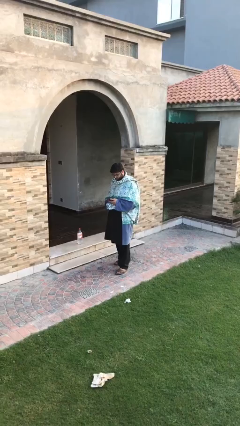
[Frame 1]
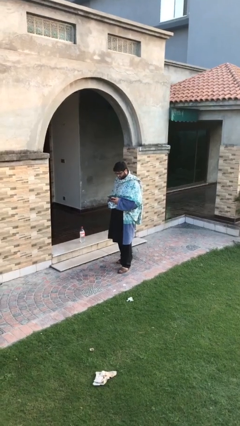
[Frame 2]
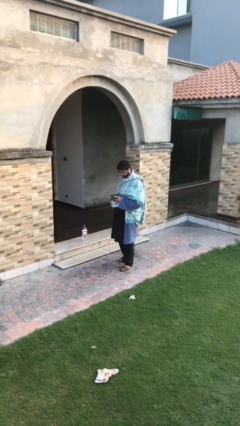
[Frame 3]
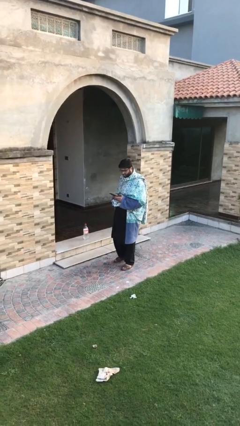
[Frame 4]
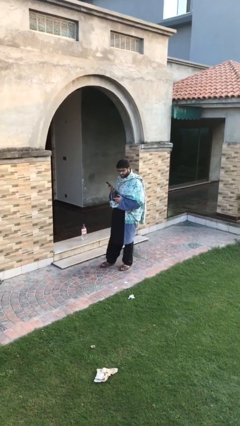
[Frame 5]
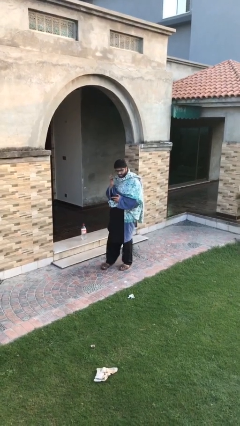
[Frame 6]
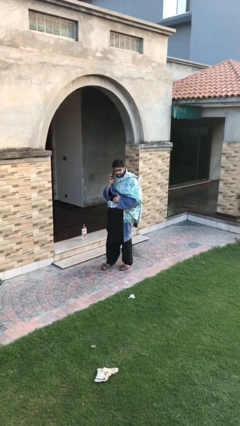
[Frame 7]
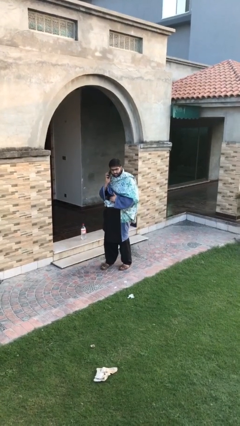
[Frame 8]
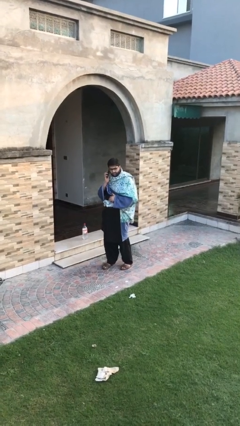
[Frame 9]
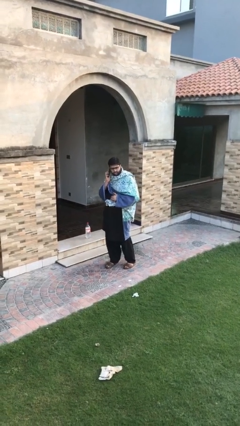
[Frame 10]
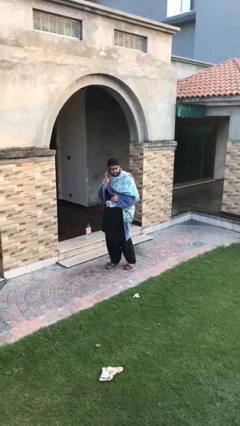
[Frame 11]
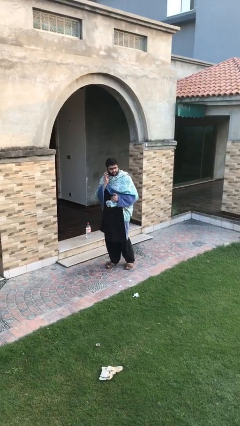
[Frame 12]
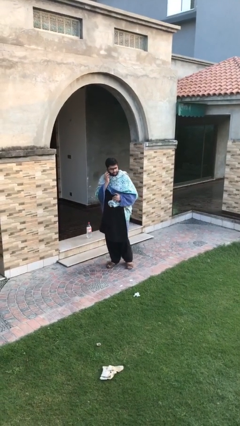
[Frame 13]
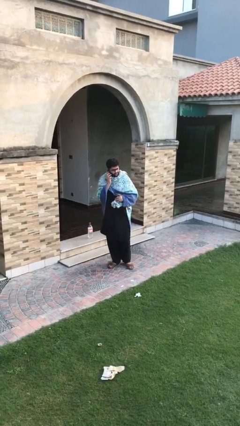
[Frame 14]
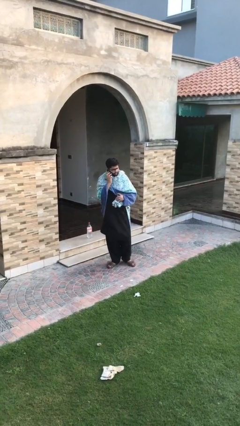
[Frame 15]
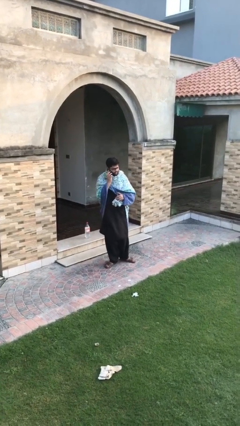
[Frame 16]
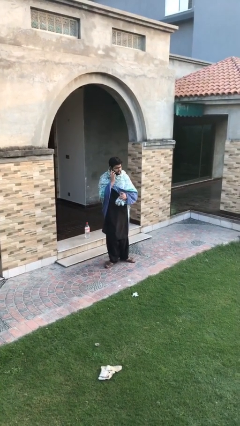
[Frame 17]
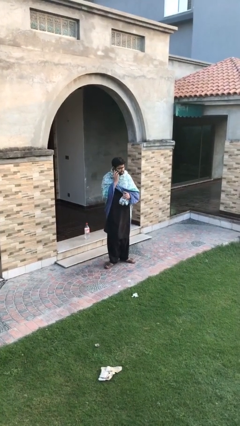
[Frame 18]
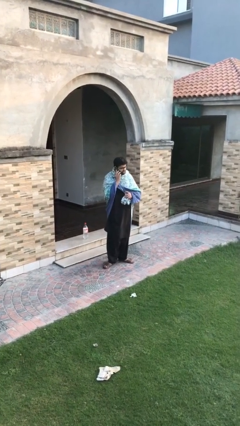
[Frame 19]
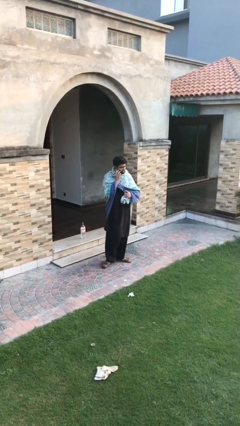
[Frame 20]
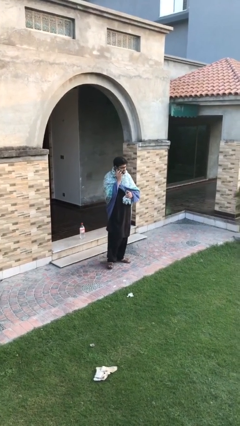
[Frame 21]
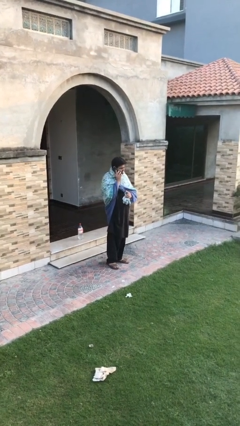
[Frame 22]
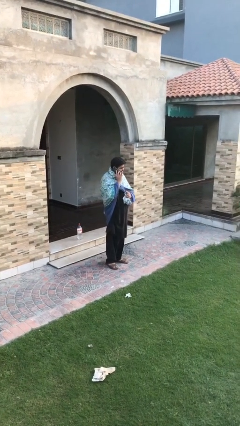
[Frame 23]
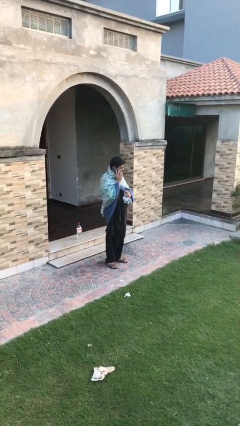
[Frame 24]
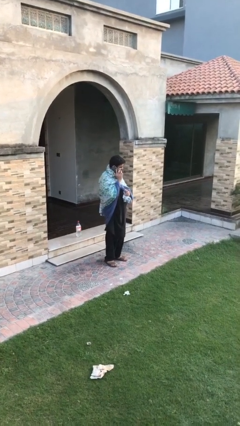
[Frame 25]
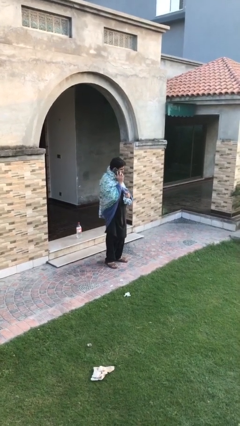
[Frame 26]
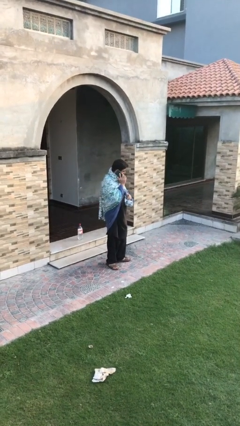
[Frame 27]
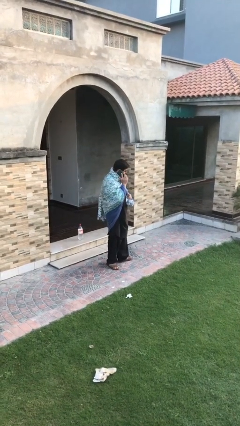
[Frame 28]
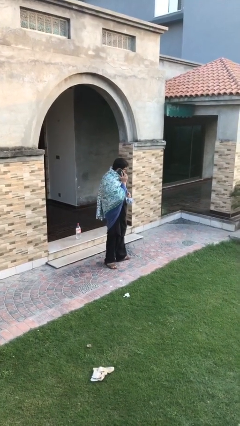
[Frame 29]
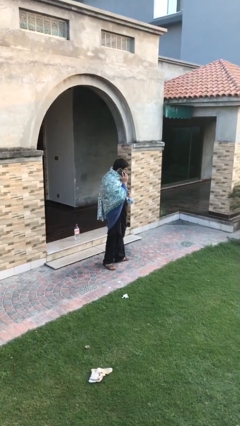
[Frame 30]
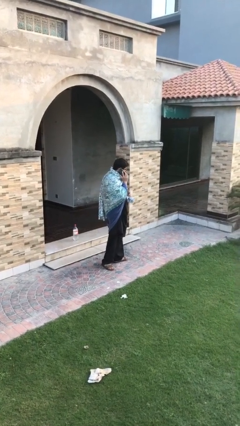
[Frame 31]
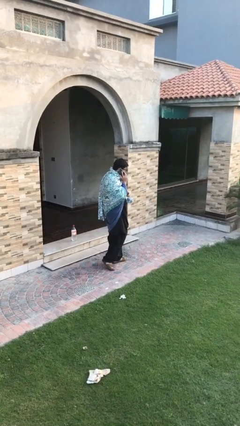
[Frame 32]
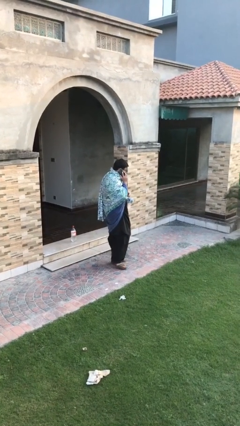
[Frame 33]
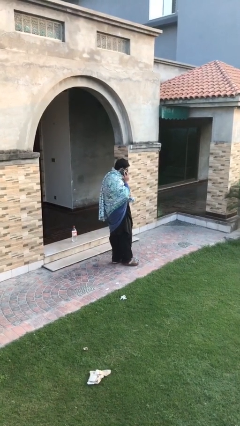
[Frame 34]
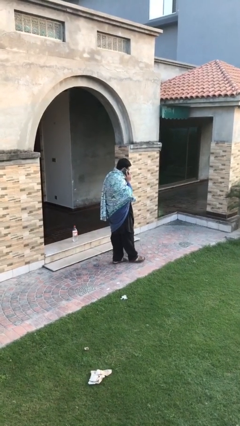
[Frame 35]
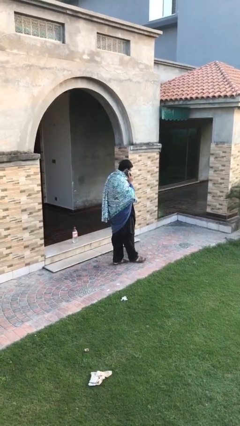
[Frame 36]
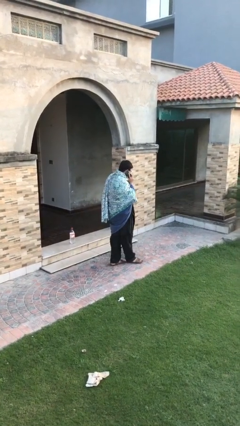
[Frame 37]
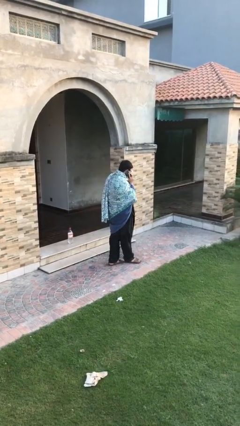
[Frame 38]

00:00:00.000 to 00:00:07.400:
person talks on phone

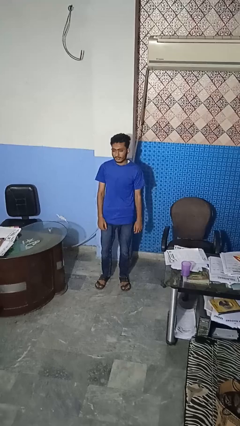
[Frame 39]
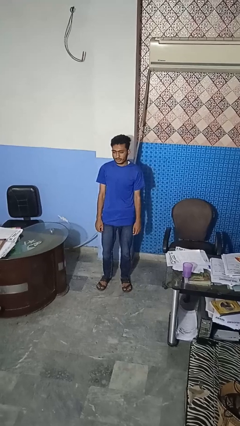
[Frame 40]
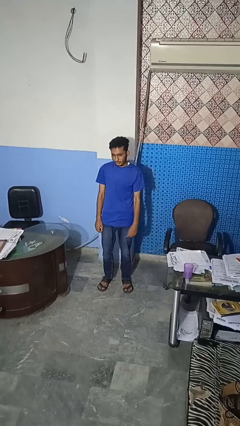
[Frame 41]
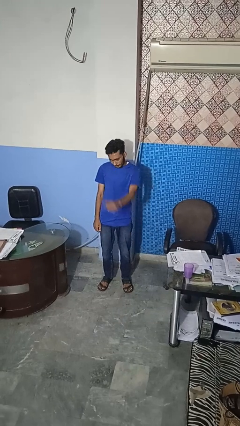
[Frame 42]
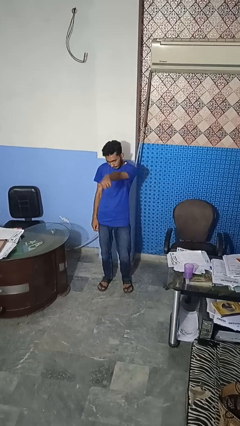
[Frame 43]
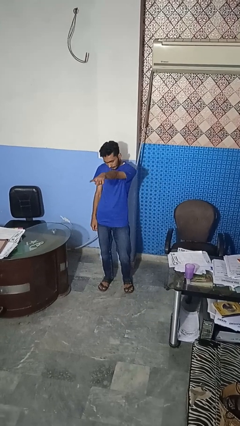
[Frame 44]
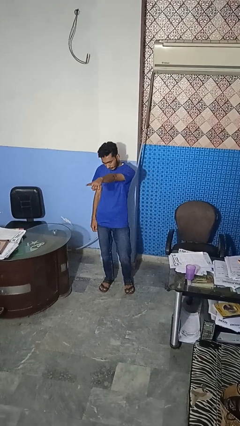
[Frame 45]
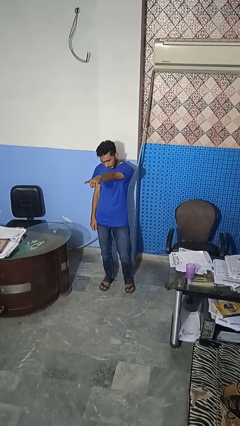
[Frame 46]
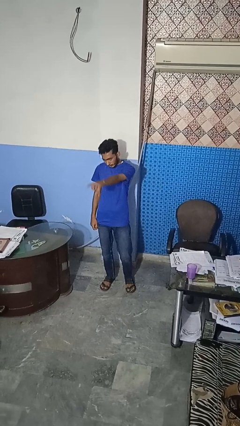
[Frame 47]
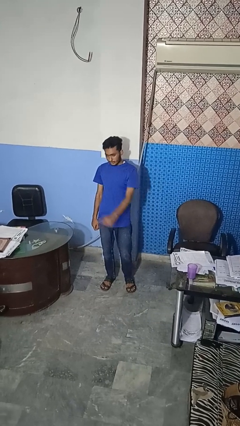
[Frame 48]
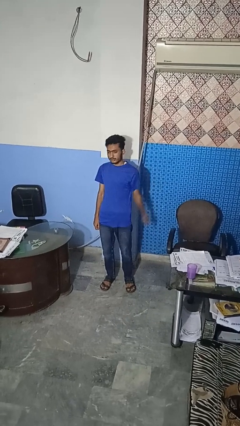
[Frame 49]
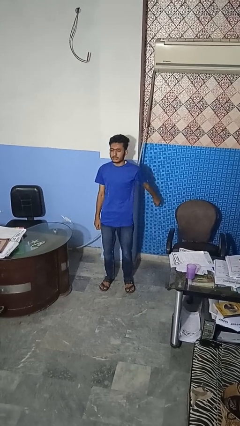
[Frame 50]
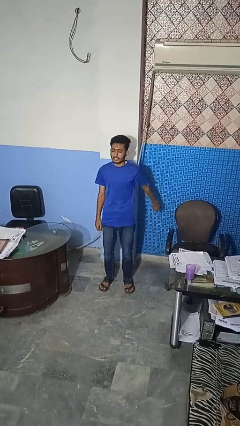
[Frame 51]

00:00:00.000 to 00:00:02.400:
person points at person

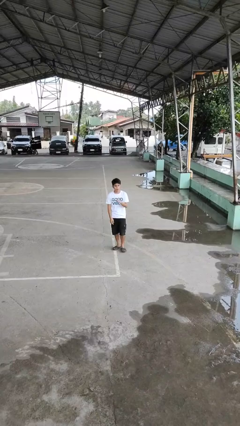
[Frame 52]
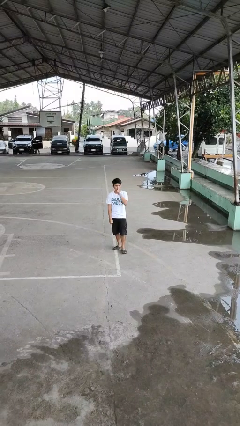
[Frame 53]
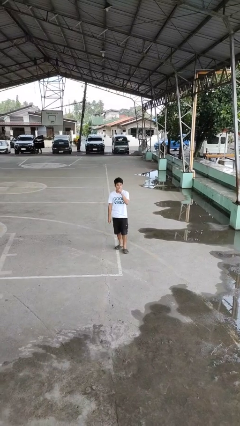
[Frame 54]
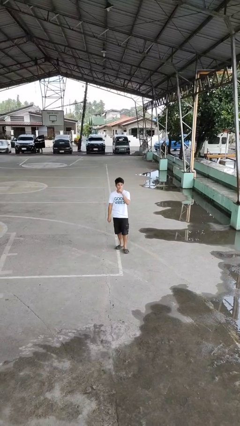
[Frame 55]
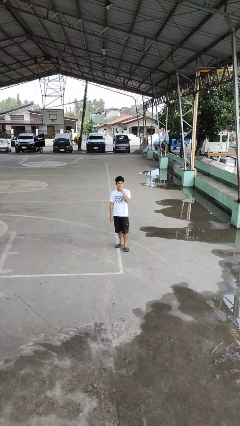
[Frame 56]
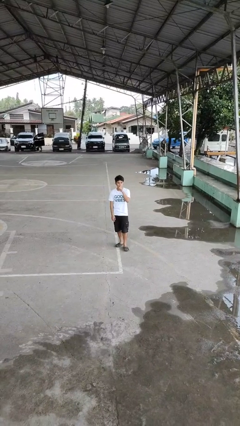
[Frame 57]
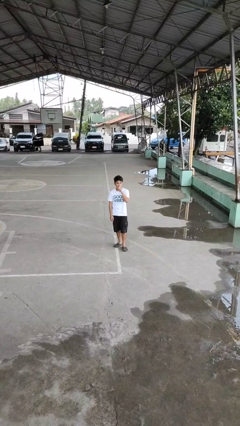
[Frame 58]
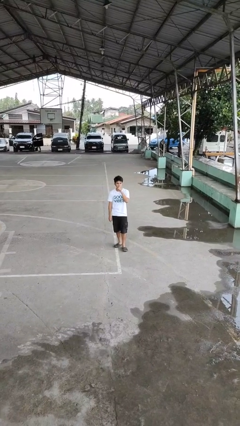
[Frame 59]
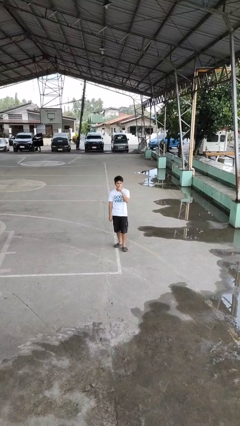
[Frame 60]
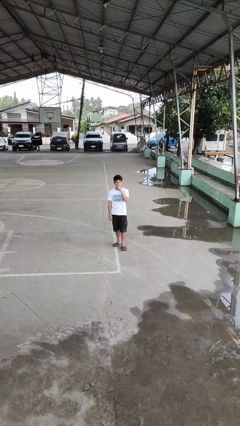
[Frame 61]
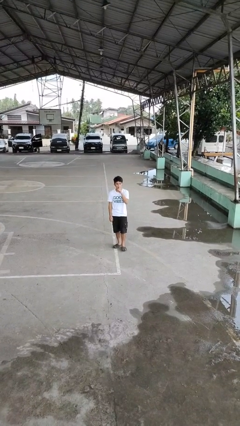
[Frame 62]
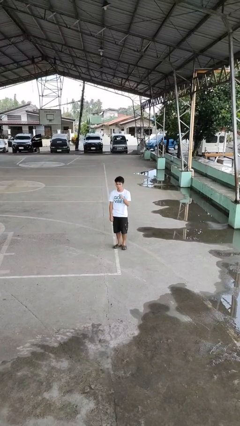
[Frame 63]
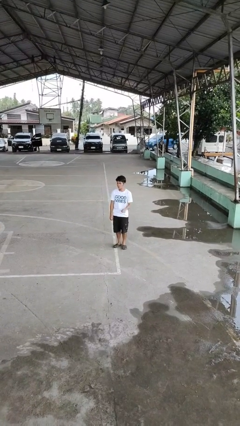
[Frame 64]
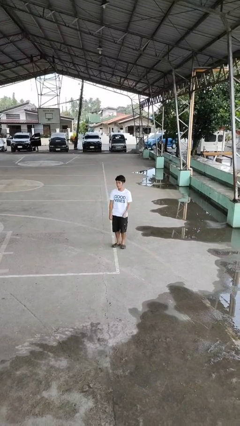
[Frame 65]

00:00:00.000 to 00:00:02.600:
person gestures be quiet

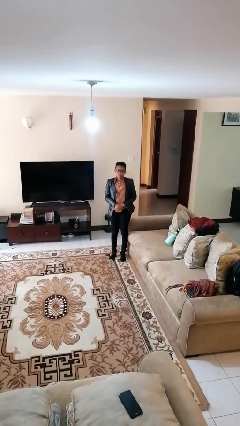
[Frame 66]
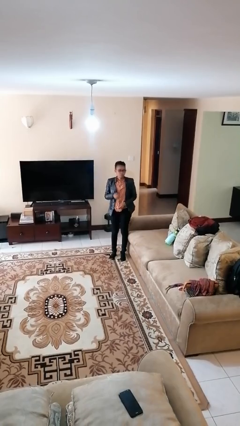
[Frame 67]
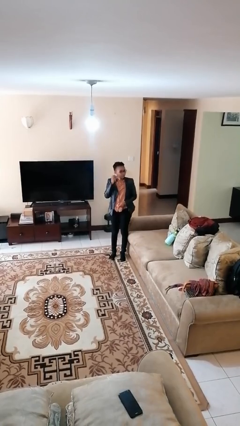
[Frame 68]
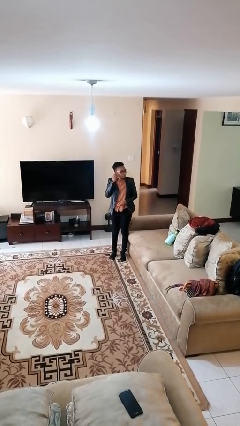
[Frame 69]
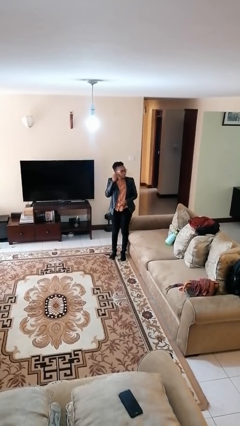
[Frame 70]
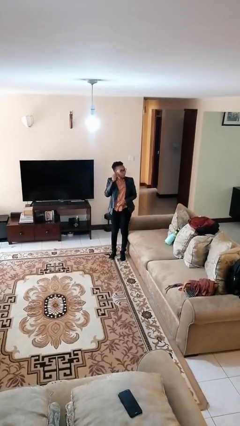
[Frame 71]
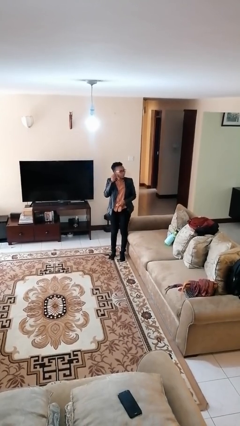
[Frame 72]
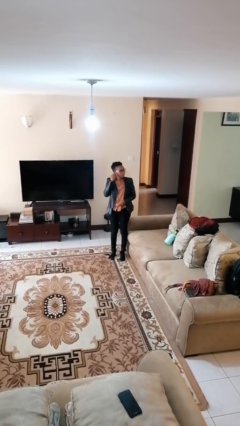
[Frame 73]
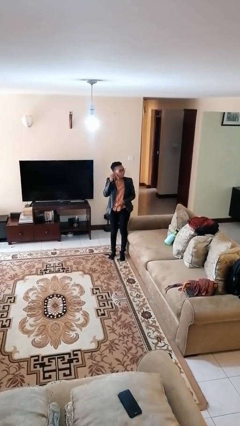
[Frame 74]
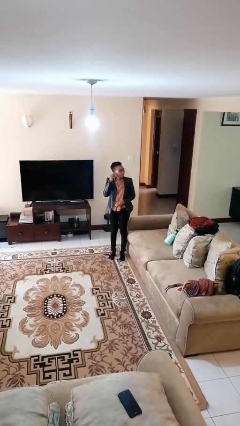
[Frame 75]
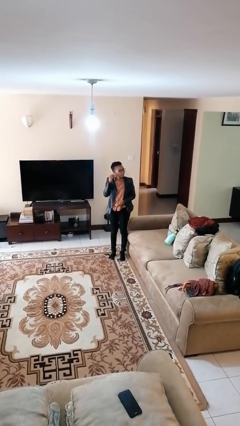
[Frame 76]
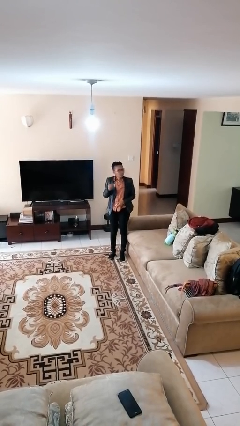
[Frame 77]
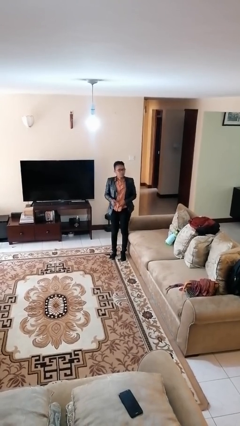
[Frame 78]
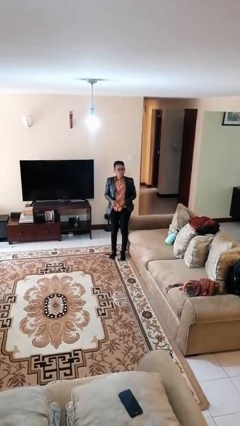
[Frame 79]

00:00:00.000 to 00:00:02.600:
person takes off earrings

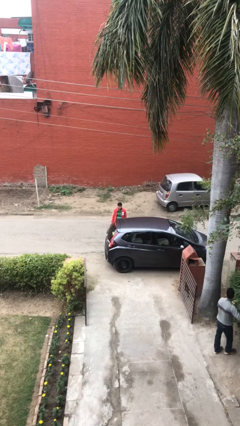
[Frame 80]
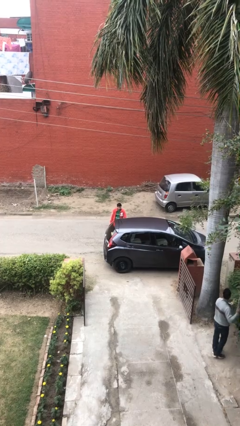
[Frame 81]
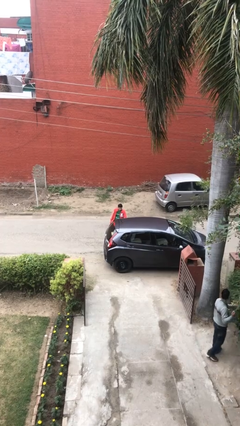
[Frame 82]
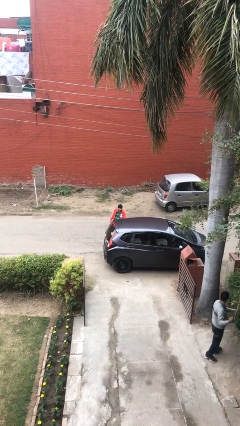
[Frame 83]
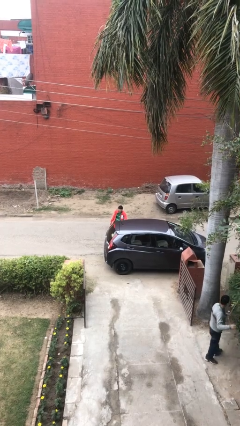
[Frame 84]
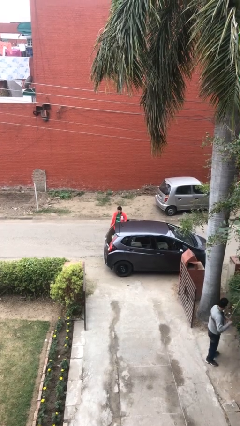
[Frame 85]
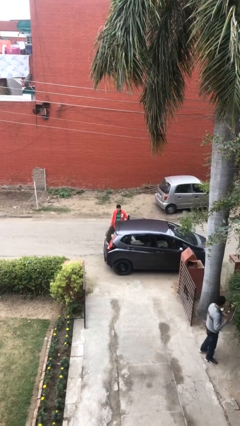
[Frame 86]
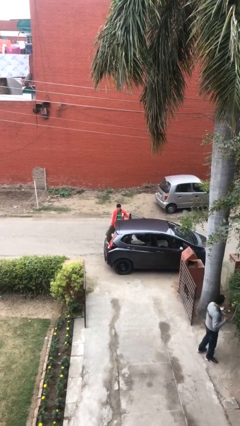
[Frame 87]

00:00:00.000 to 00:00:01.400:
person opens car door

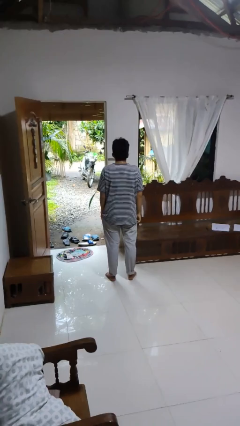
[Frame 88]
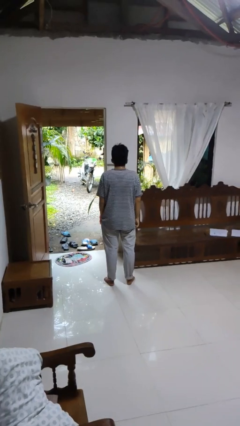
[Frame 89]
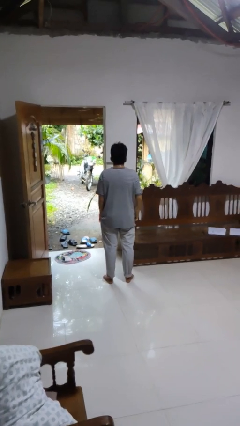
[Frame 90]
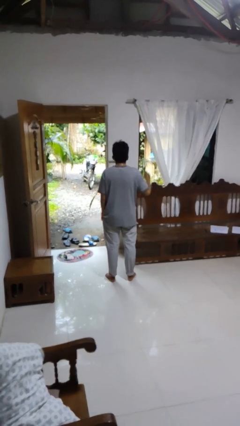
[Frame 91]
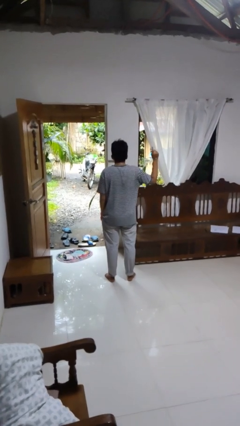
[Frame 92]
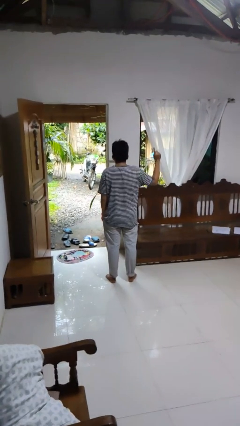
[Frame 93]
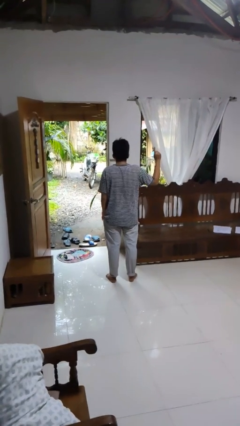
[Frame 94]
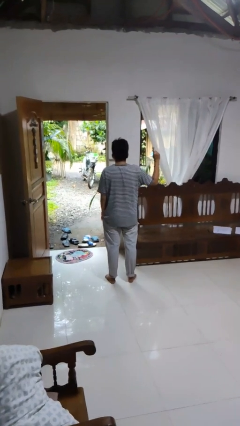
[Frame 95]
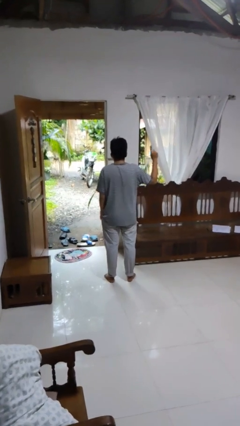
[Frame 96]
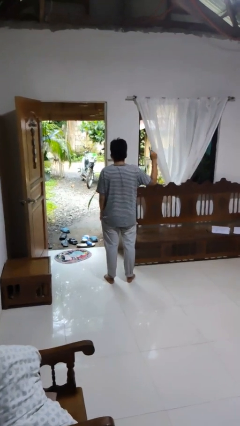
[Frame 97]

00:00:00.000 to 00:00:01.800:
person gestures number one
